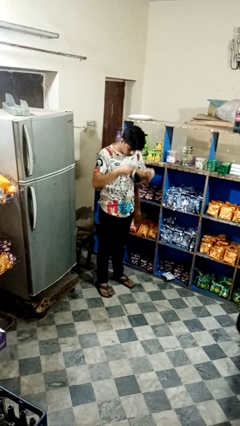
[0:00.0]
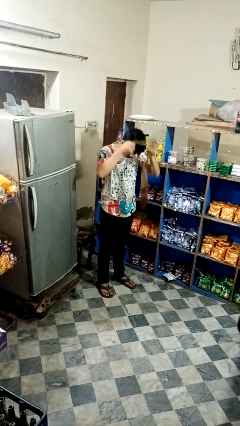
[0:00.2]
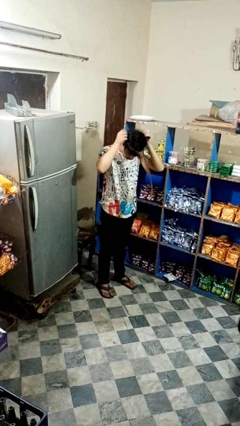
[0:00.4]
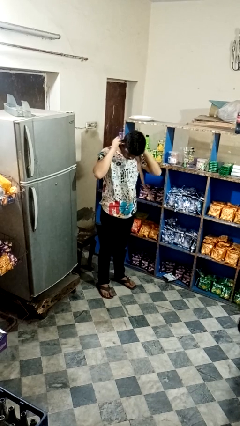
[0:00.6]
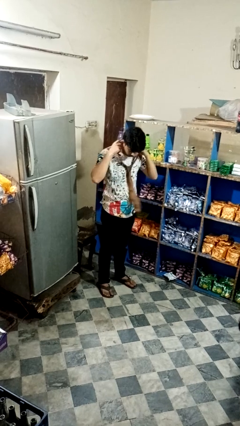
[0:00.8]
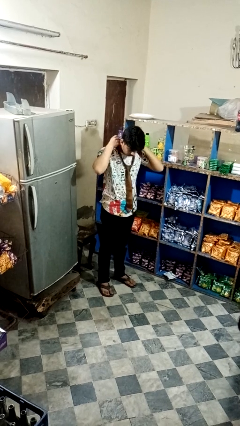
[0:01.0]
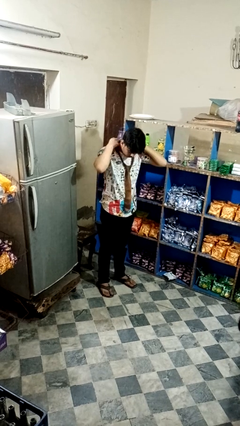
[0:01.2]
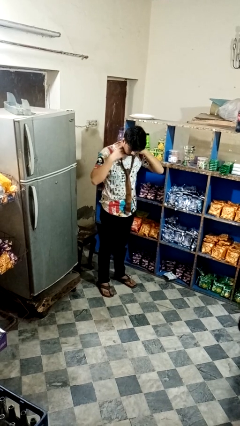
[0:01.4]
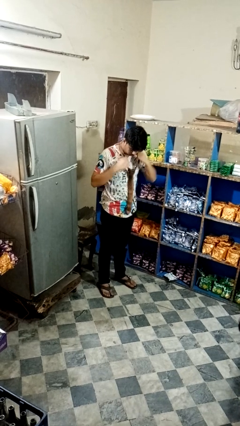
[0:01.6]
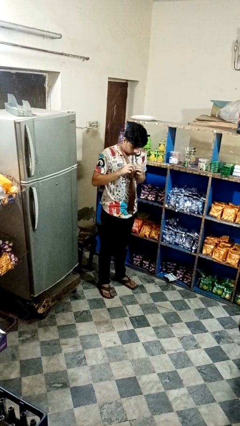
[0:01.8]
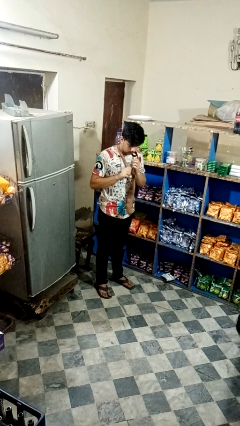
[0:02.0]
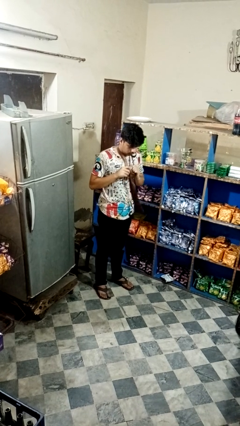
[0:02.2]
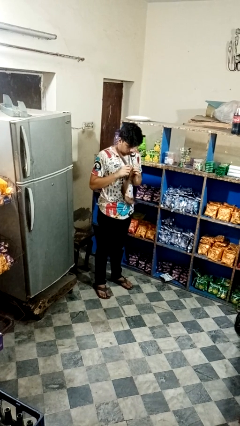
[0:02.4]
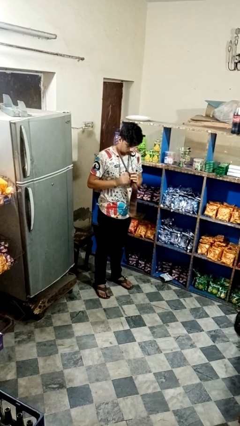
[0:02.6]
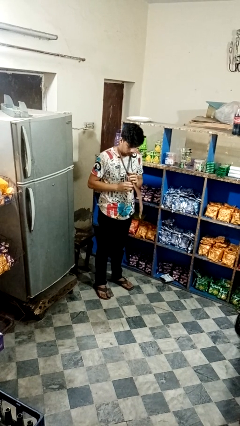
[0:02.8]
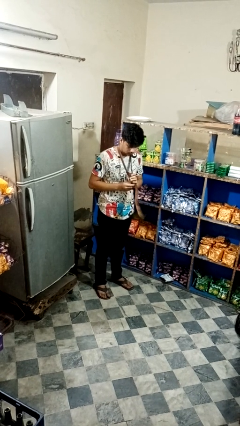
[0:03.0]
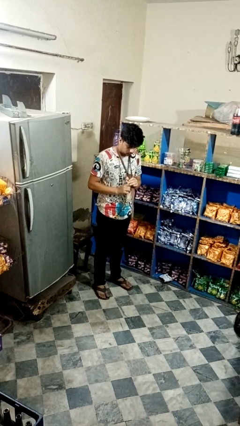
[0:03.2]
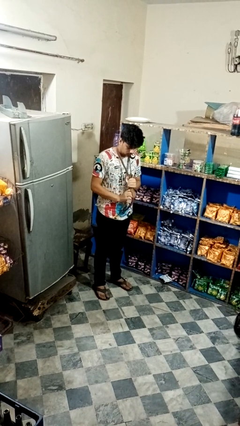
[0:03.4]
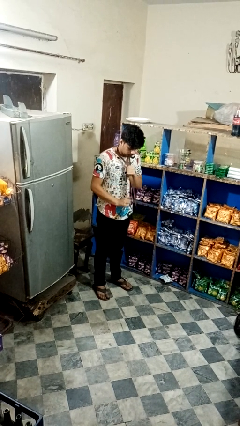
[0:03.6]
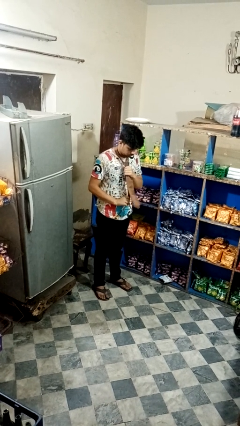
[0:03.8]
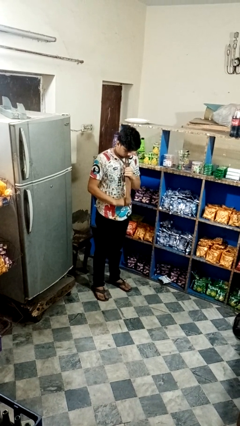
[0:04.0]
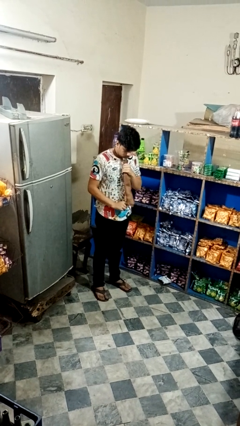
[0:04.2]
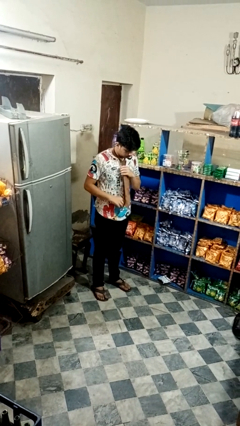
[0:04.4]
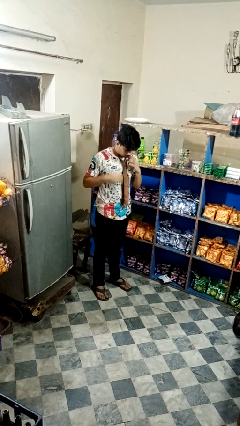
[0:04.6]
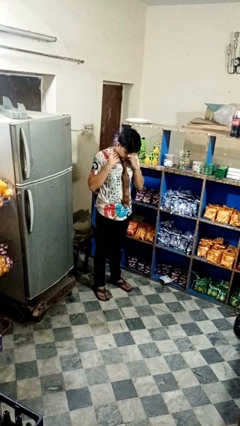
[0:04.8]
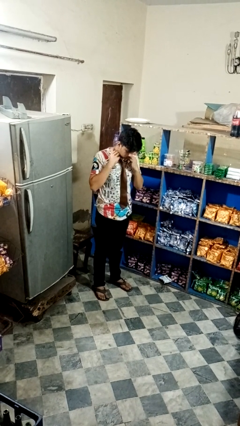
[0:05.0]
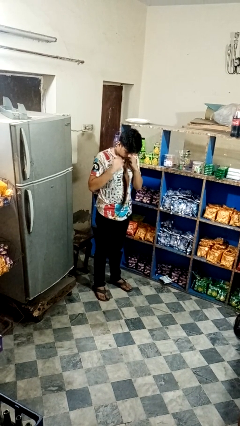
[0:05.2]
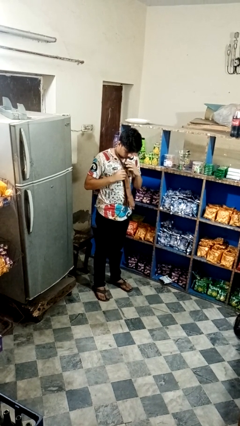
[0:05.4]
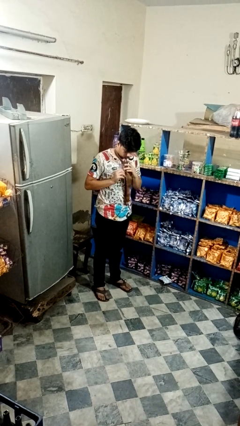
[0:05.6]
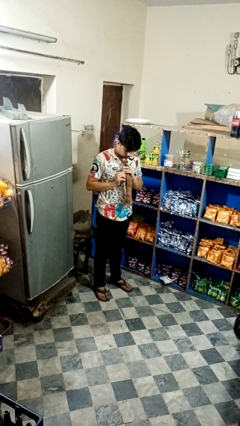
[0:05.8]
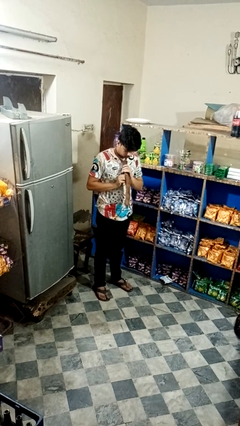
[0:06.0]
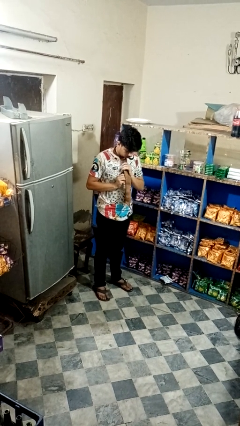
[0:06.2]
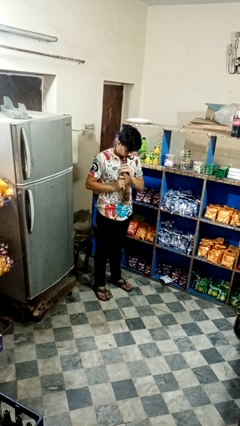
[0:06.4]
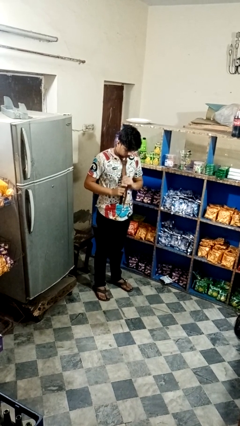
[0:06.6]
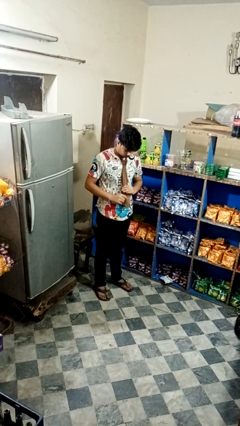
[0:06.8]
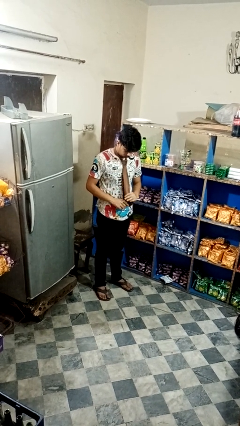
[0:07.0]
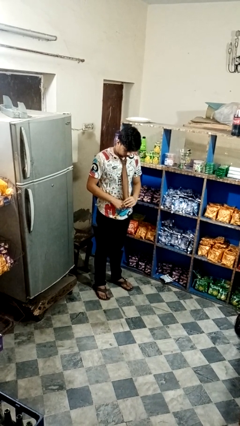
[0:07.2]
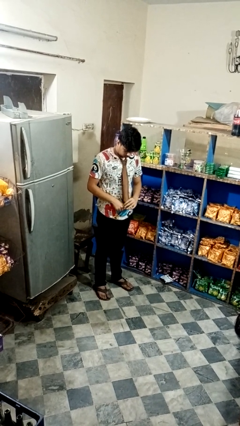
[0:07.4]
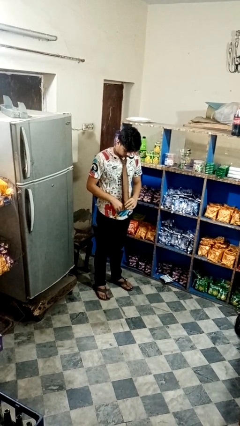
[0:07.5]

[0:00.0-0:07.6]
person puts on necktie

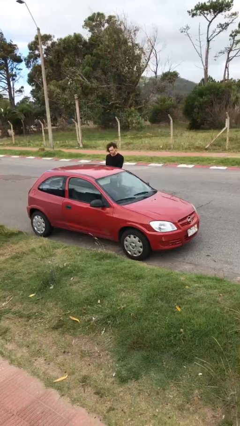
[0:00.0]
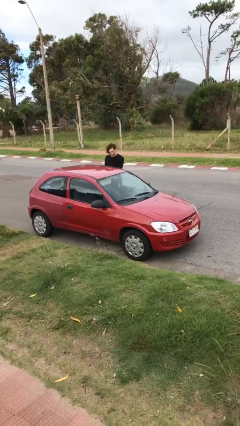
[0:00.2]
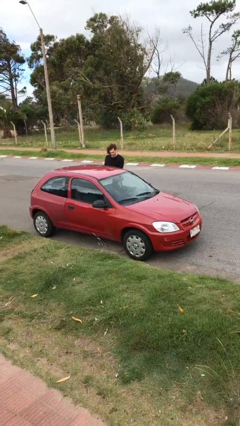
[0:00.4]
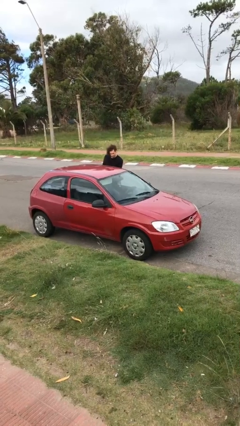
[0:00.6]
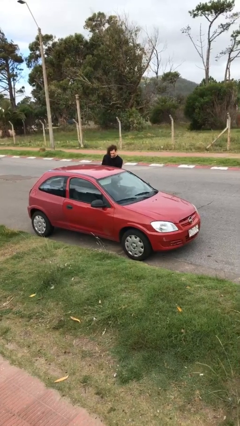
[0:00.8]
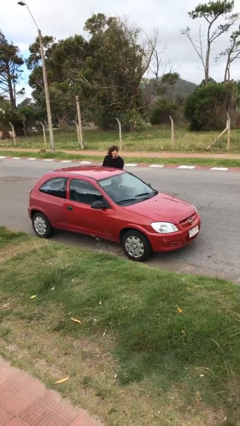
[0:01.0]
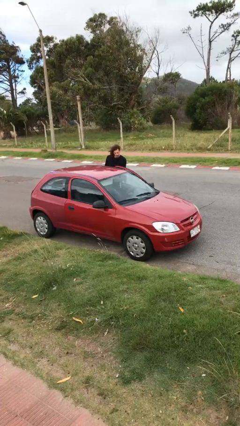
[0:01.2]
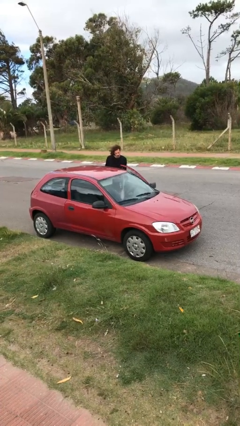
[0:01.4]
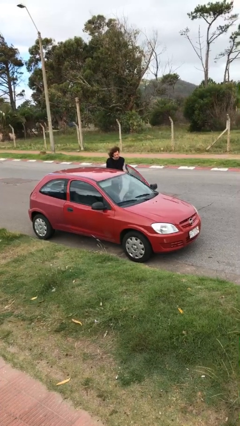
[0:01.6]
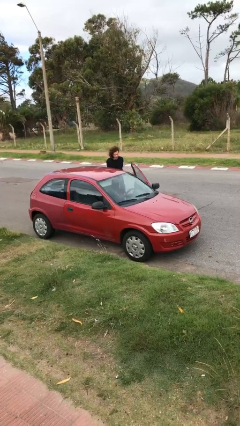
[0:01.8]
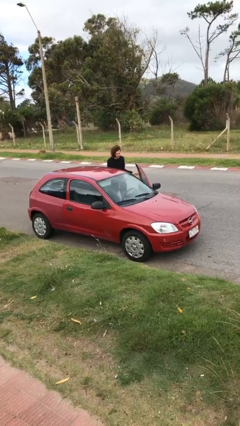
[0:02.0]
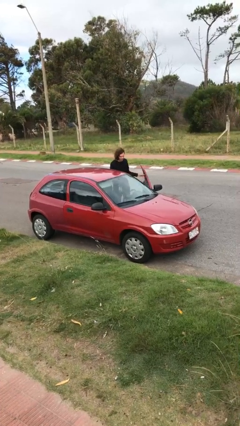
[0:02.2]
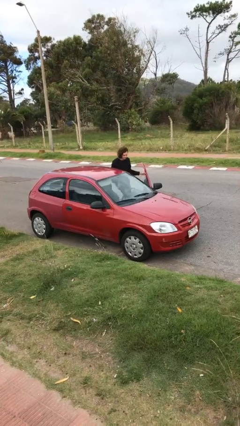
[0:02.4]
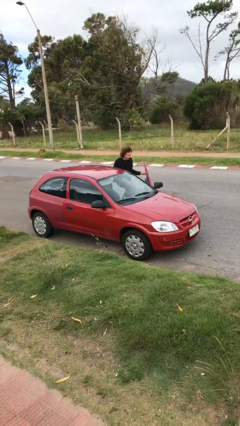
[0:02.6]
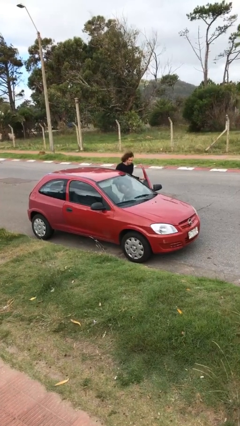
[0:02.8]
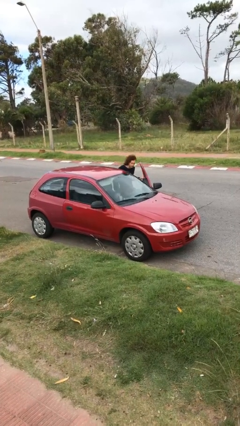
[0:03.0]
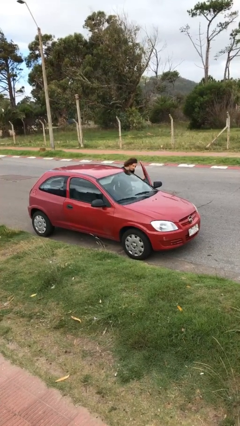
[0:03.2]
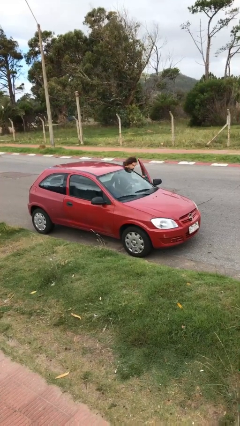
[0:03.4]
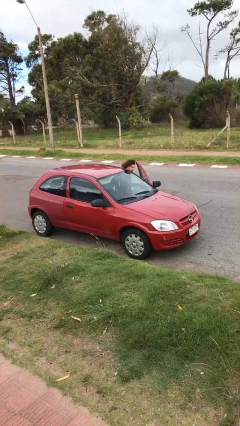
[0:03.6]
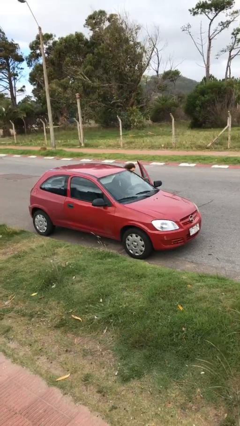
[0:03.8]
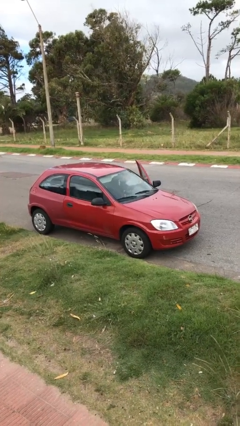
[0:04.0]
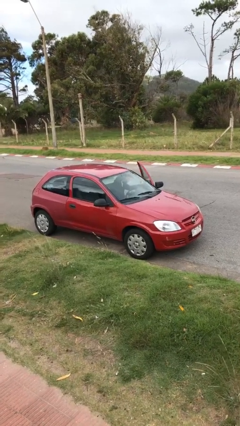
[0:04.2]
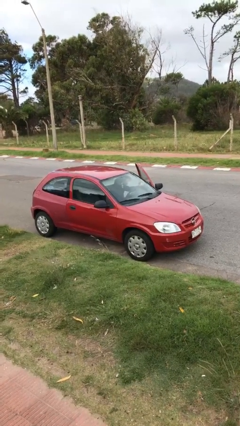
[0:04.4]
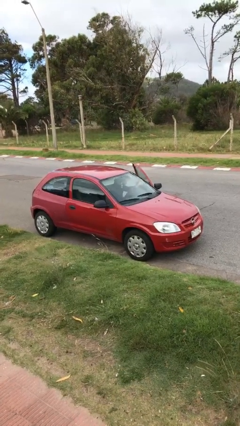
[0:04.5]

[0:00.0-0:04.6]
car picks up person

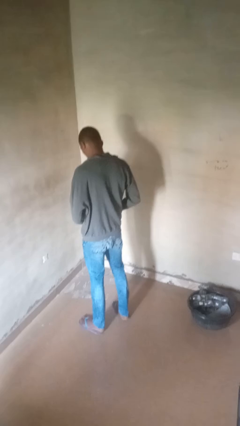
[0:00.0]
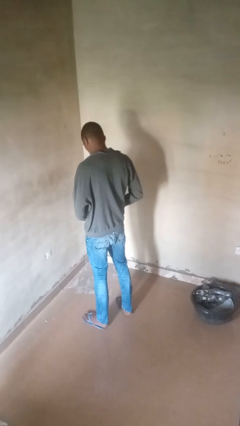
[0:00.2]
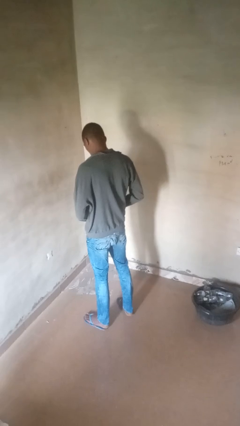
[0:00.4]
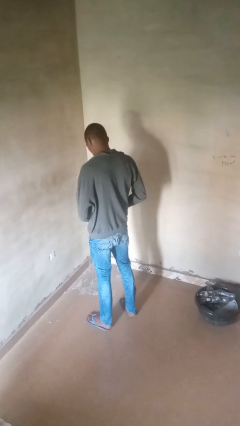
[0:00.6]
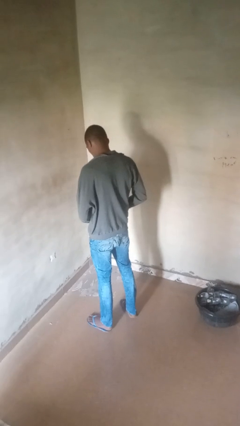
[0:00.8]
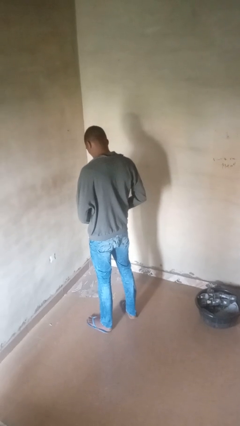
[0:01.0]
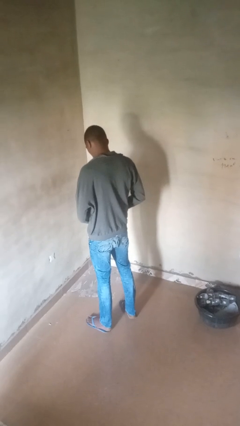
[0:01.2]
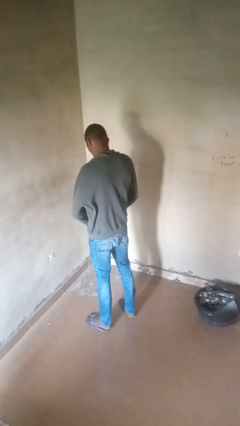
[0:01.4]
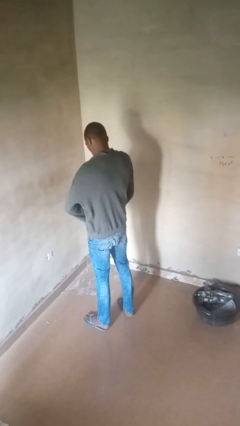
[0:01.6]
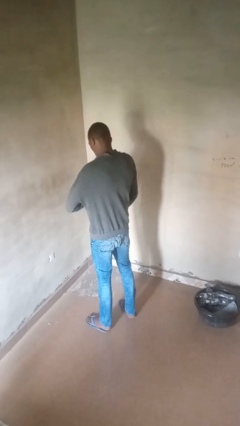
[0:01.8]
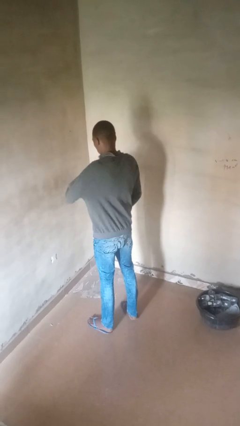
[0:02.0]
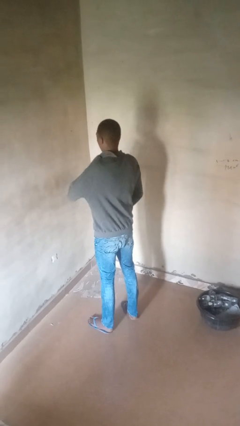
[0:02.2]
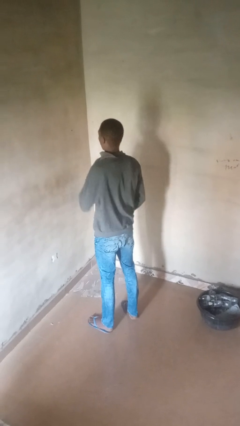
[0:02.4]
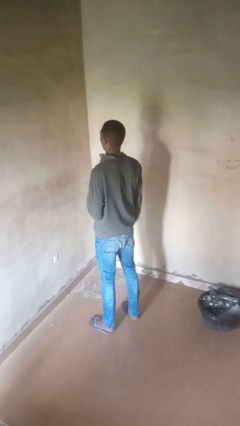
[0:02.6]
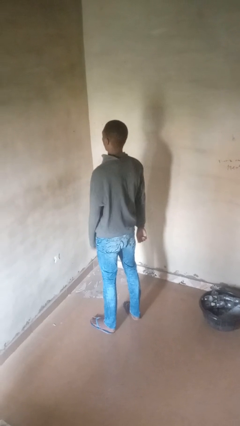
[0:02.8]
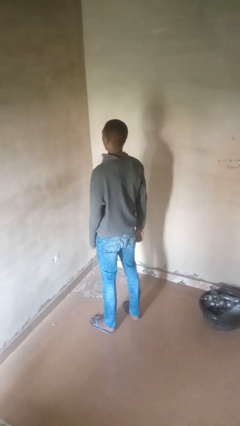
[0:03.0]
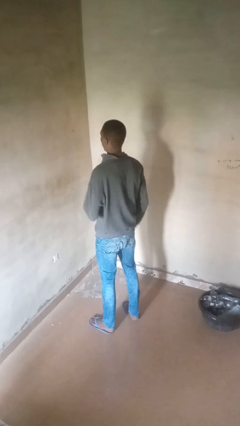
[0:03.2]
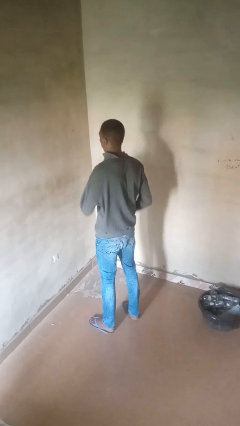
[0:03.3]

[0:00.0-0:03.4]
person zips up jacket

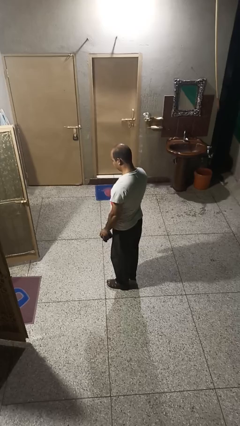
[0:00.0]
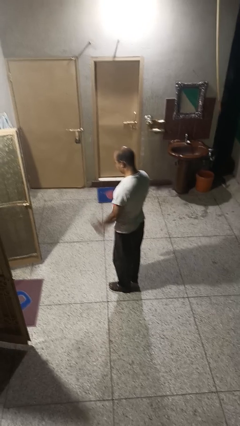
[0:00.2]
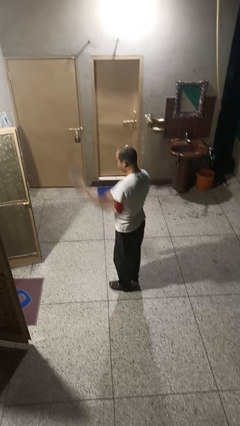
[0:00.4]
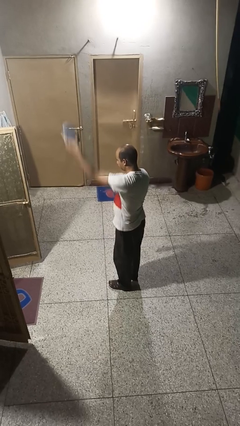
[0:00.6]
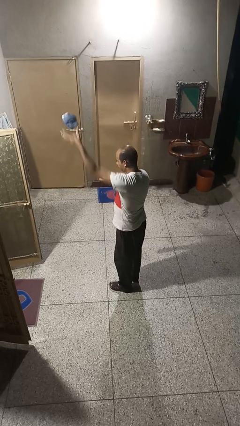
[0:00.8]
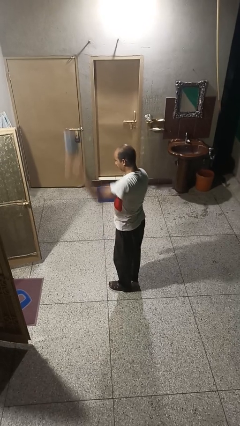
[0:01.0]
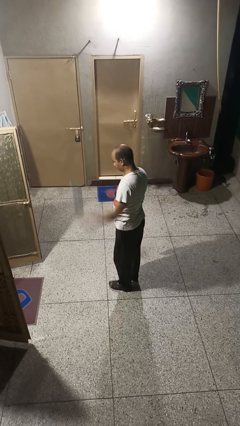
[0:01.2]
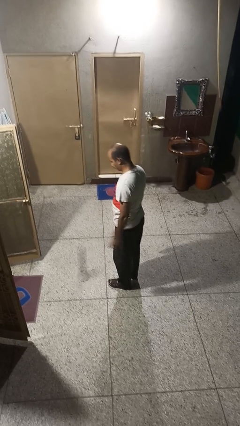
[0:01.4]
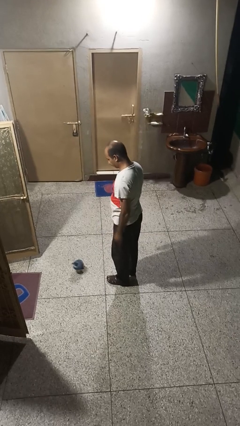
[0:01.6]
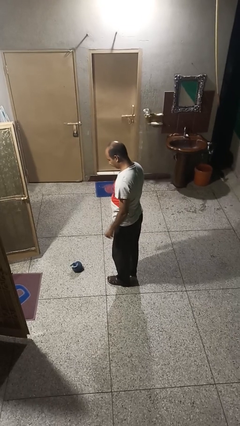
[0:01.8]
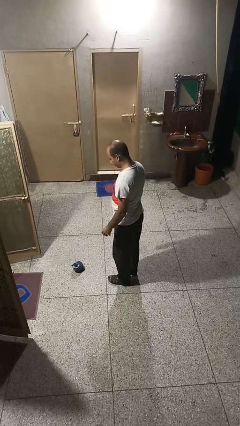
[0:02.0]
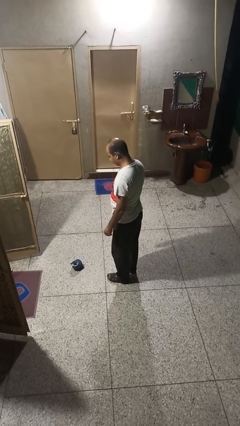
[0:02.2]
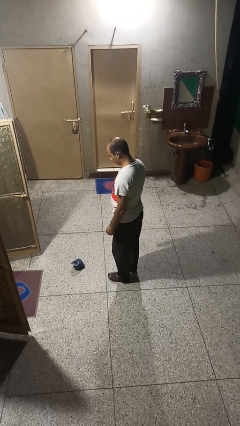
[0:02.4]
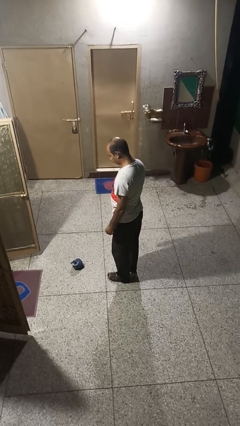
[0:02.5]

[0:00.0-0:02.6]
person throws object into air
